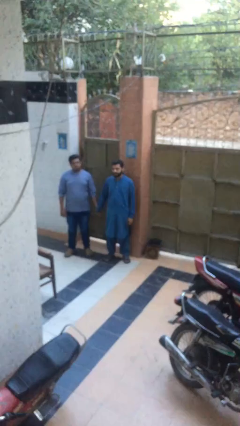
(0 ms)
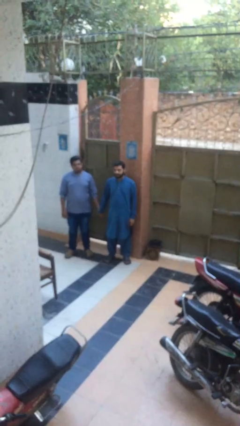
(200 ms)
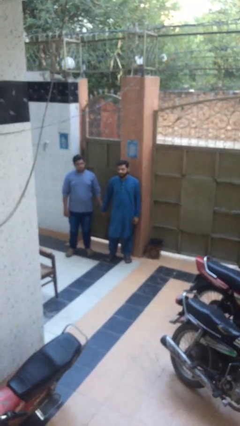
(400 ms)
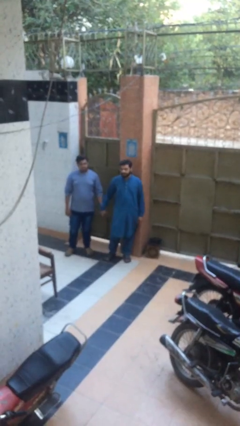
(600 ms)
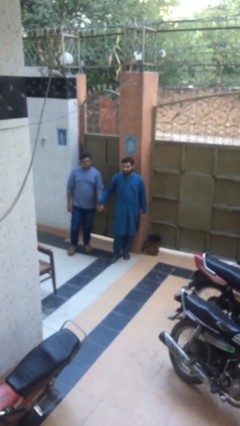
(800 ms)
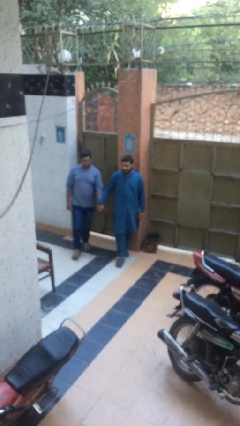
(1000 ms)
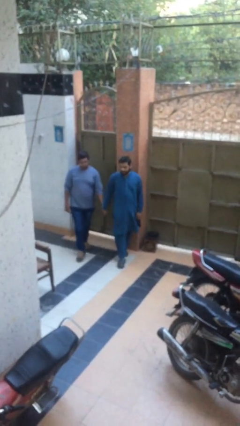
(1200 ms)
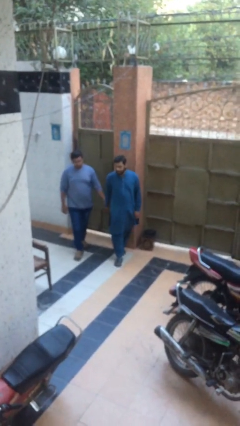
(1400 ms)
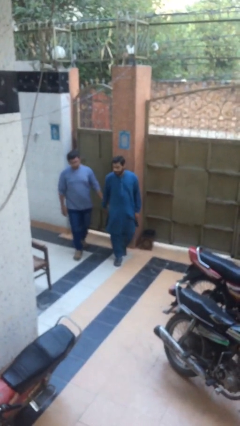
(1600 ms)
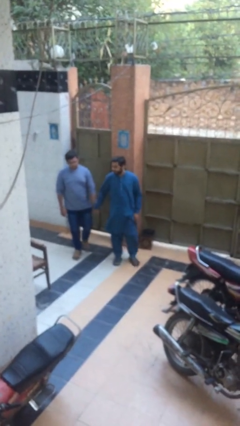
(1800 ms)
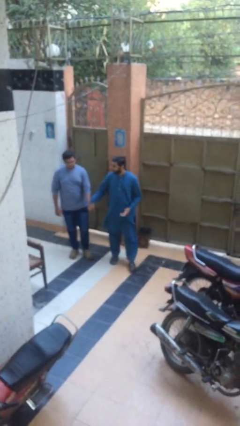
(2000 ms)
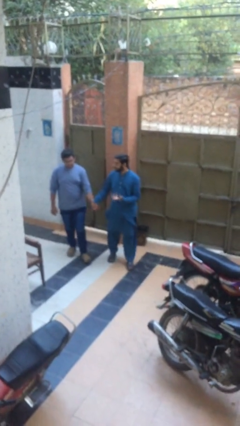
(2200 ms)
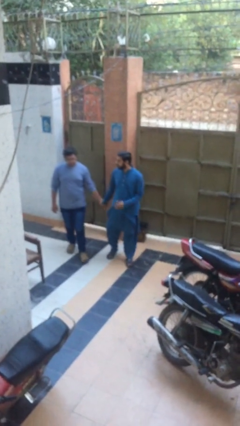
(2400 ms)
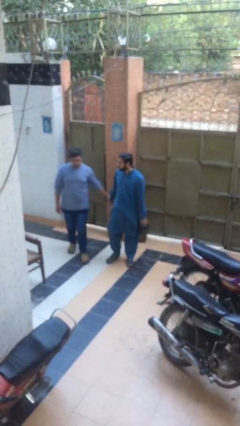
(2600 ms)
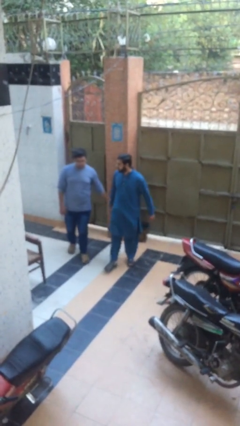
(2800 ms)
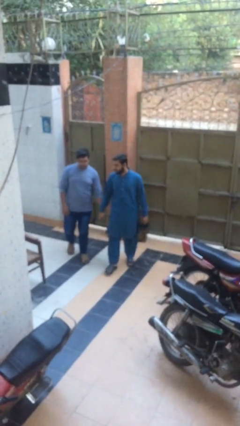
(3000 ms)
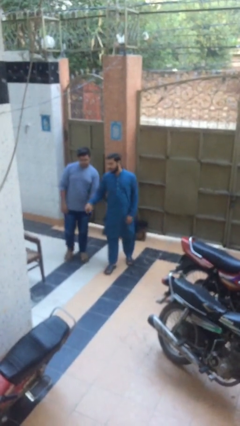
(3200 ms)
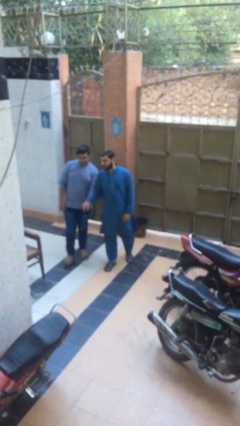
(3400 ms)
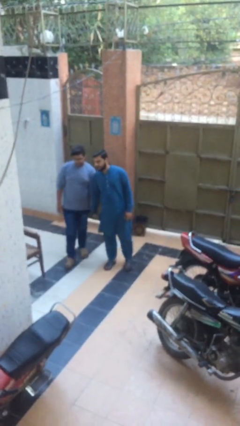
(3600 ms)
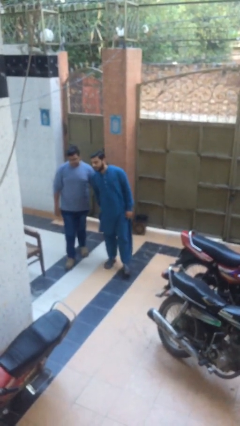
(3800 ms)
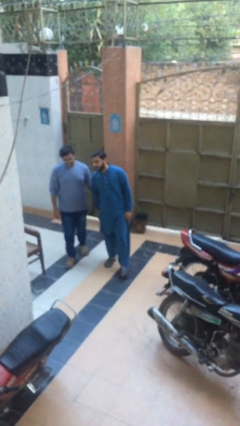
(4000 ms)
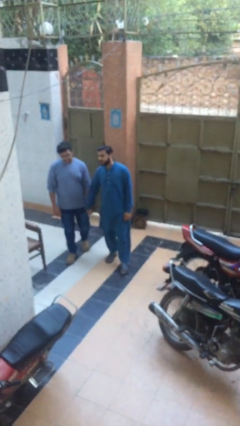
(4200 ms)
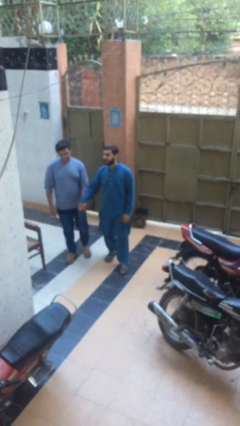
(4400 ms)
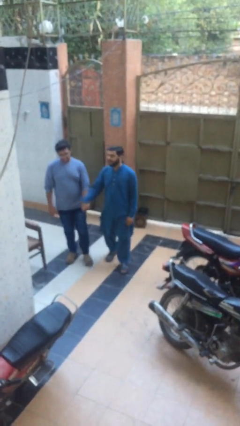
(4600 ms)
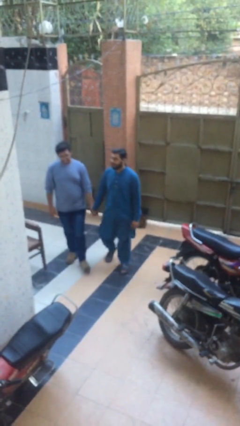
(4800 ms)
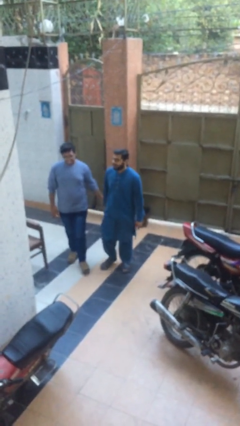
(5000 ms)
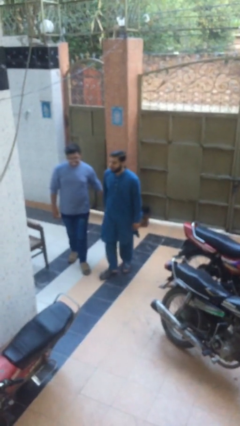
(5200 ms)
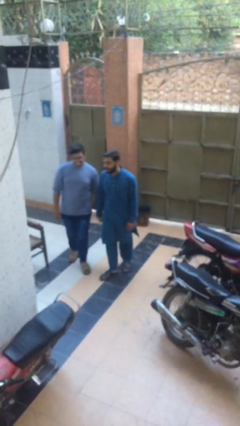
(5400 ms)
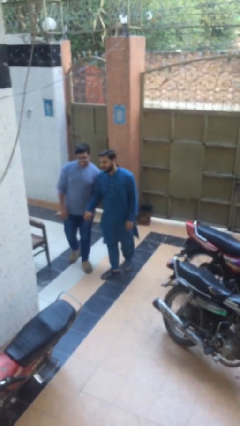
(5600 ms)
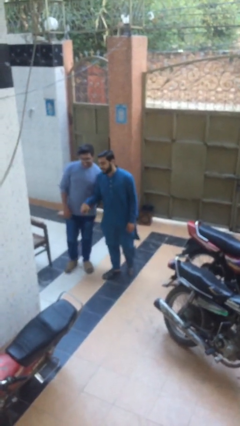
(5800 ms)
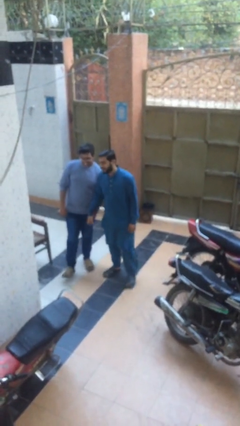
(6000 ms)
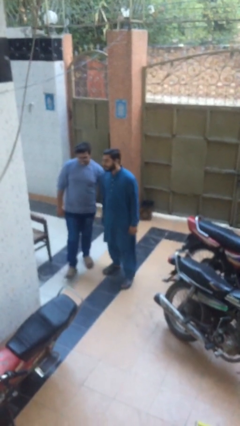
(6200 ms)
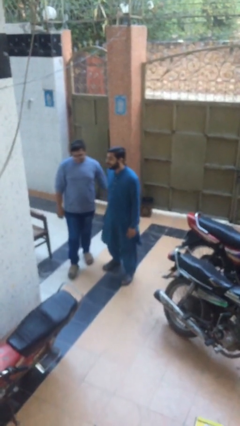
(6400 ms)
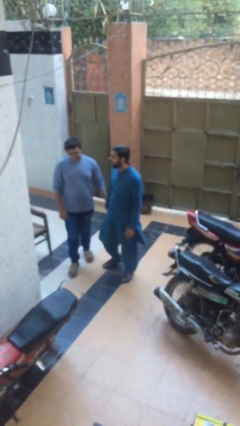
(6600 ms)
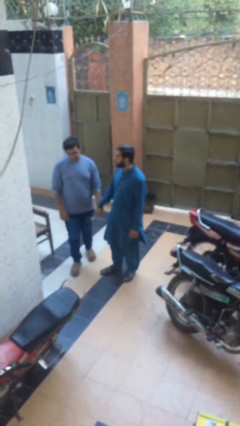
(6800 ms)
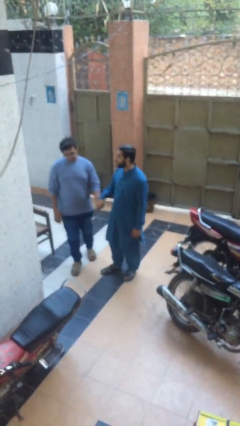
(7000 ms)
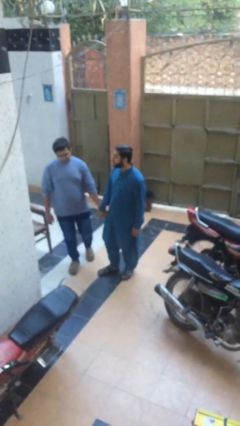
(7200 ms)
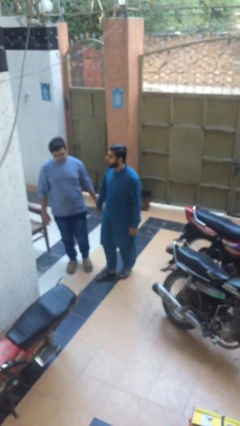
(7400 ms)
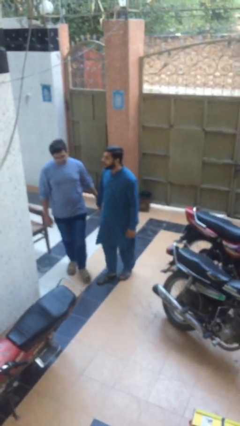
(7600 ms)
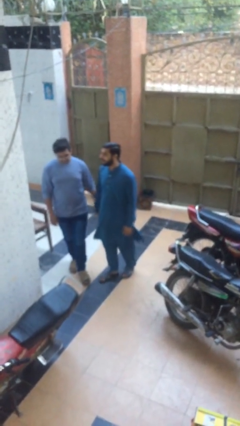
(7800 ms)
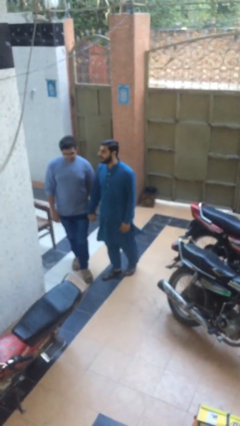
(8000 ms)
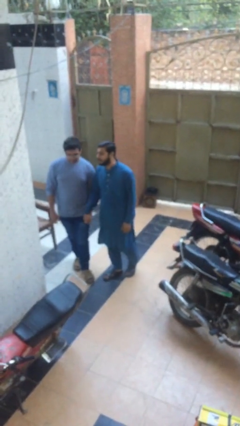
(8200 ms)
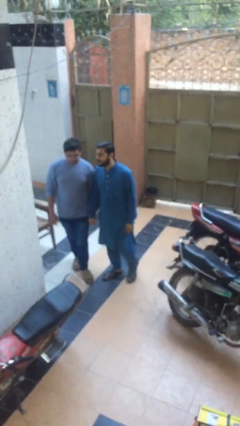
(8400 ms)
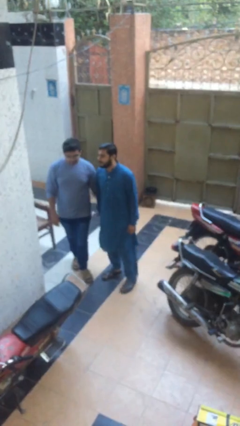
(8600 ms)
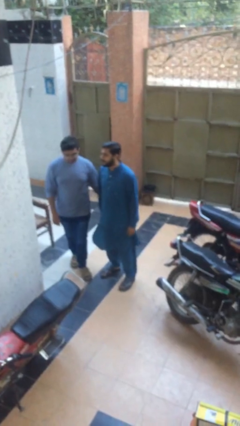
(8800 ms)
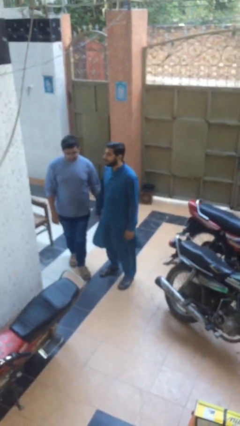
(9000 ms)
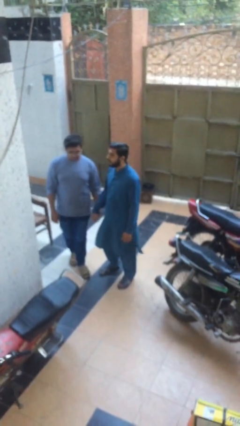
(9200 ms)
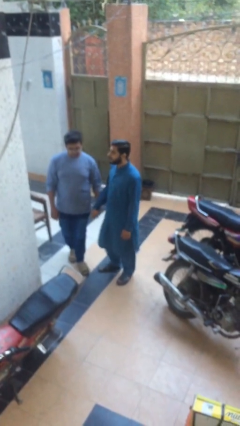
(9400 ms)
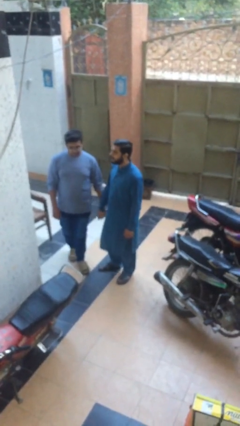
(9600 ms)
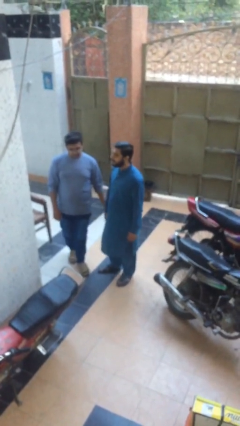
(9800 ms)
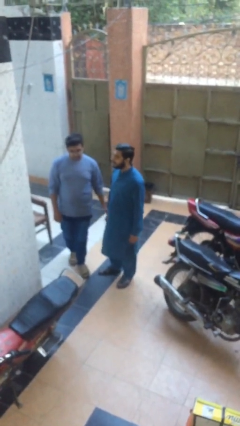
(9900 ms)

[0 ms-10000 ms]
person holds hand

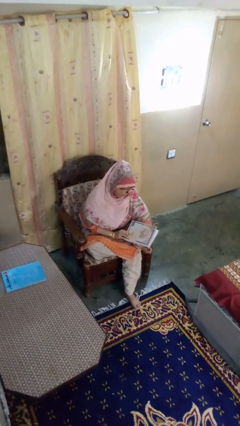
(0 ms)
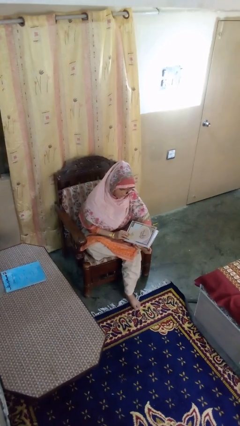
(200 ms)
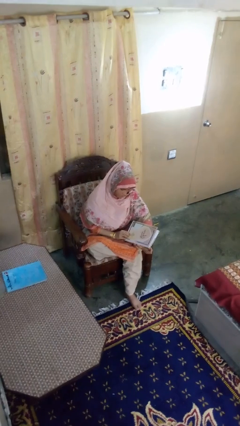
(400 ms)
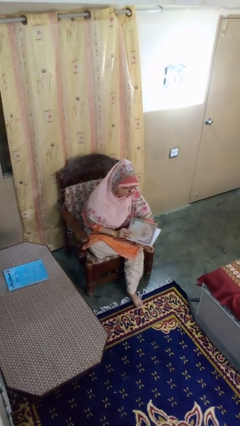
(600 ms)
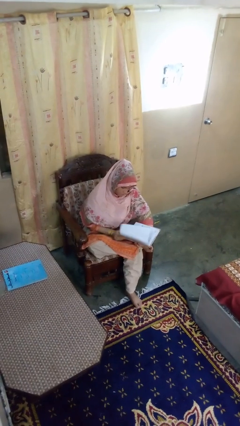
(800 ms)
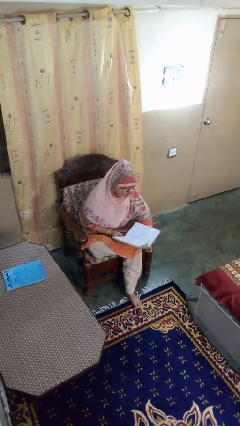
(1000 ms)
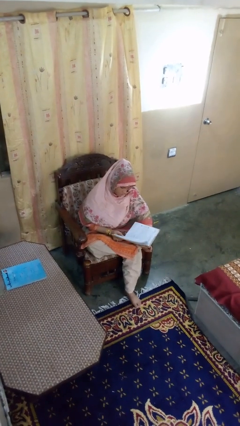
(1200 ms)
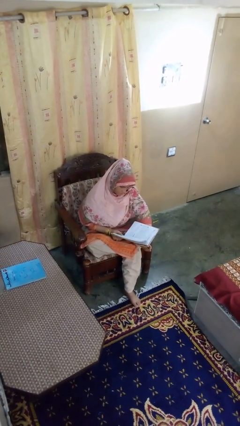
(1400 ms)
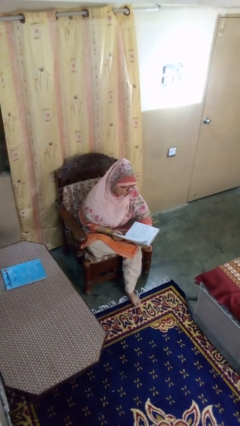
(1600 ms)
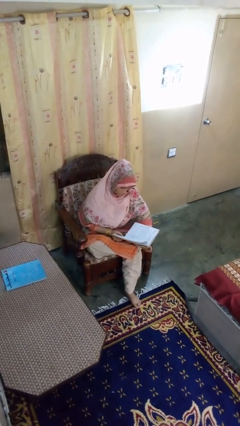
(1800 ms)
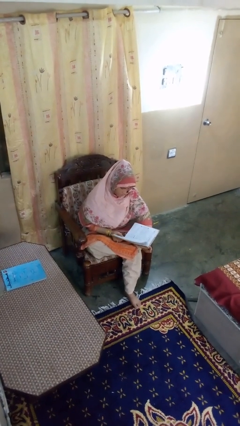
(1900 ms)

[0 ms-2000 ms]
person reads book

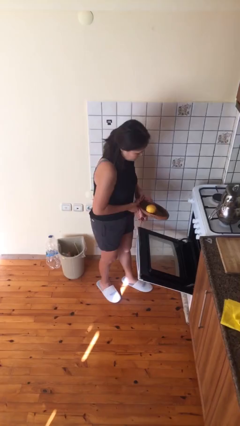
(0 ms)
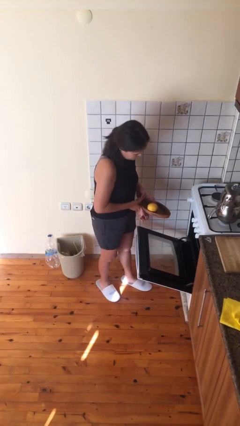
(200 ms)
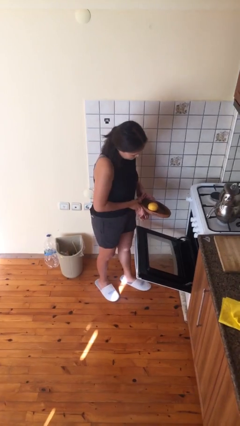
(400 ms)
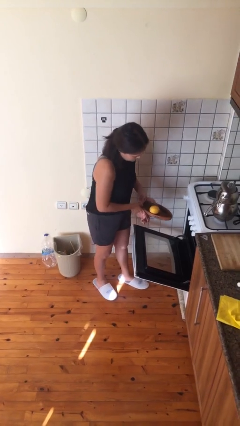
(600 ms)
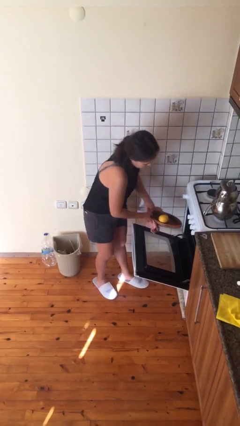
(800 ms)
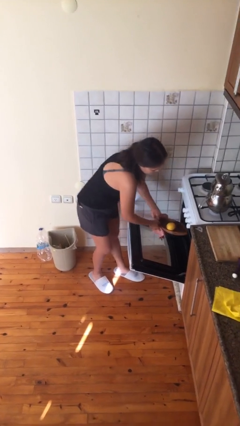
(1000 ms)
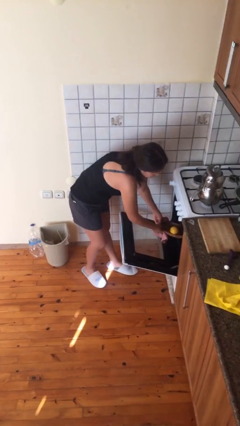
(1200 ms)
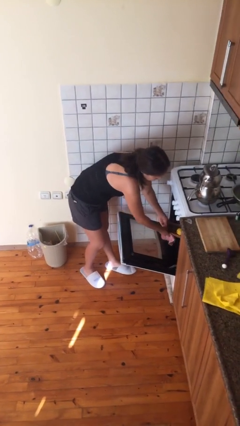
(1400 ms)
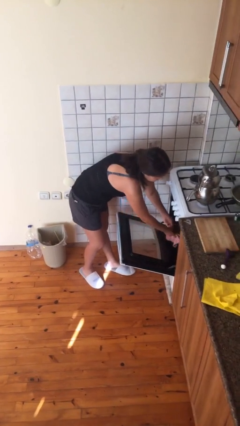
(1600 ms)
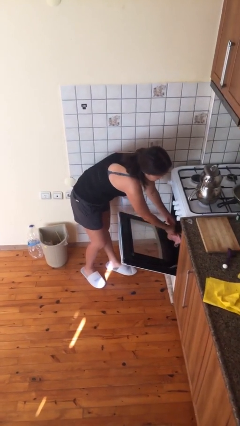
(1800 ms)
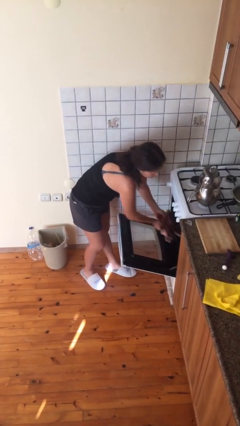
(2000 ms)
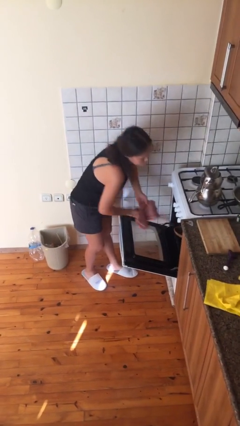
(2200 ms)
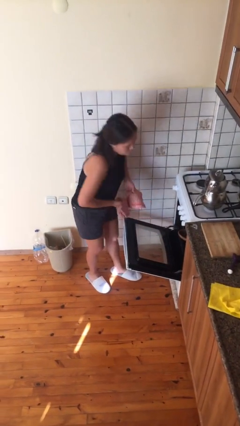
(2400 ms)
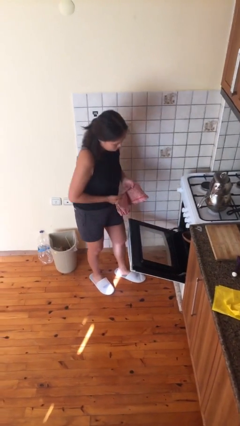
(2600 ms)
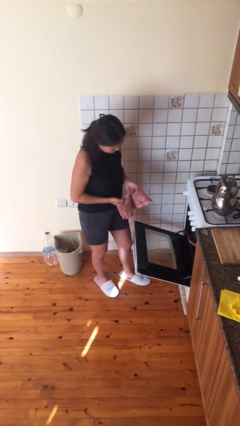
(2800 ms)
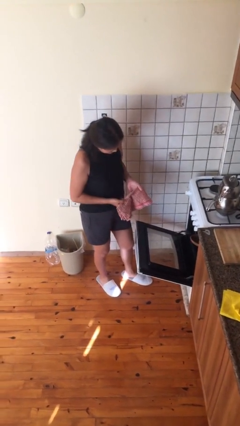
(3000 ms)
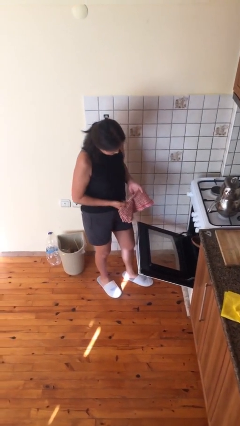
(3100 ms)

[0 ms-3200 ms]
person puts object into oven

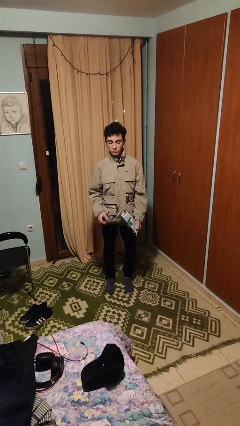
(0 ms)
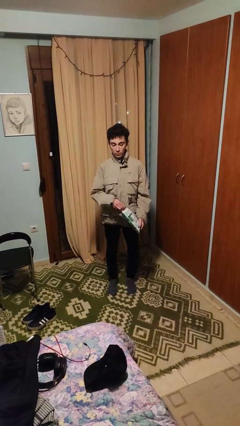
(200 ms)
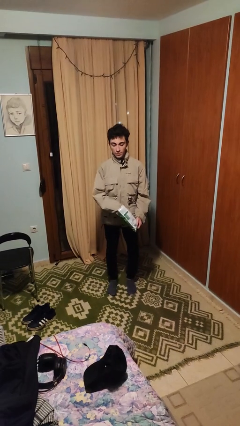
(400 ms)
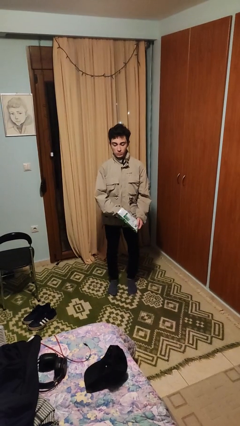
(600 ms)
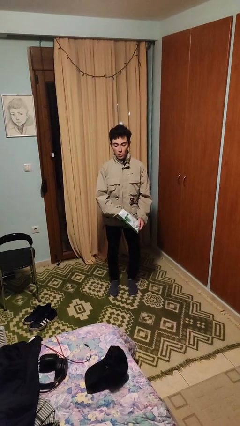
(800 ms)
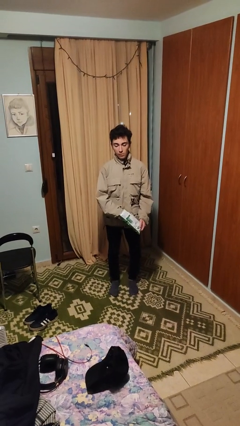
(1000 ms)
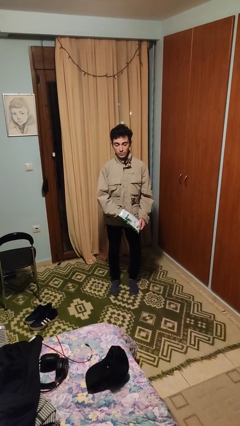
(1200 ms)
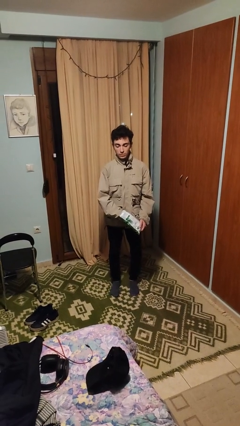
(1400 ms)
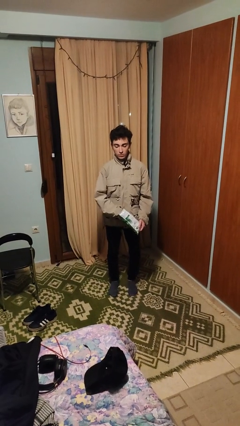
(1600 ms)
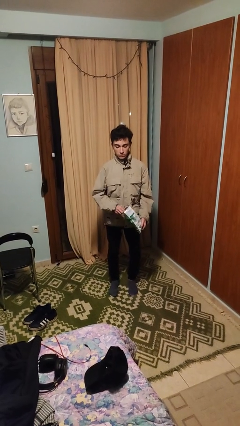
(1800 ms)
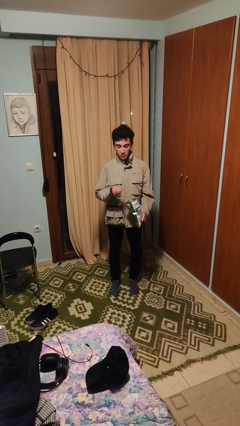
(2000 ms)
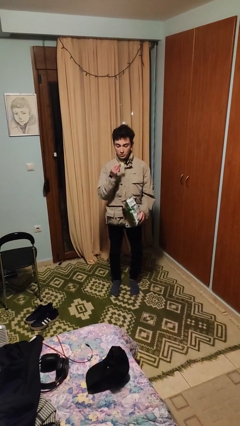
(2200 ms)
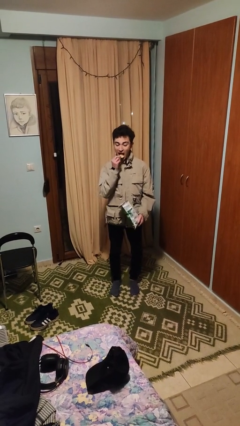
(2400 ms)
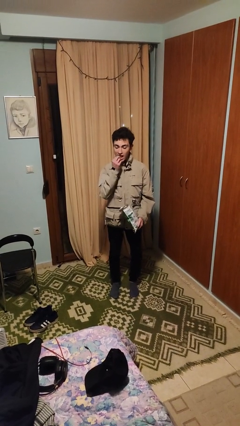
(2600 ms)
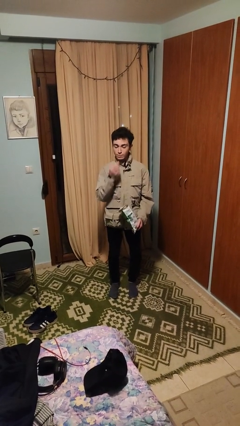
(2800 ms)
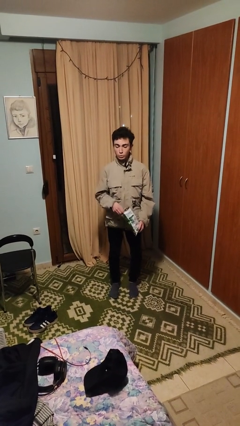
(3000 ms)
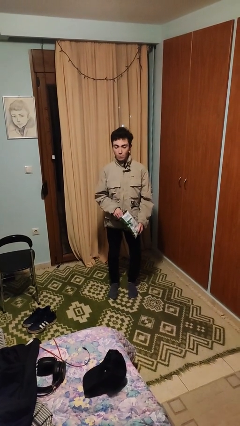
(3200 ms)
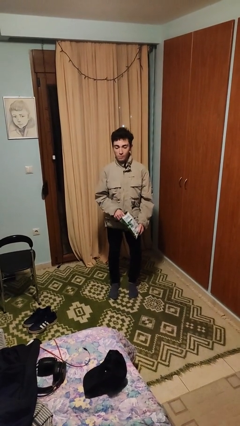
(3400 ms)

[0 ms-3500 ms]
person eats snack from bag
